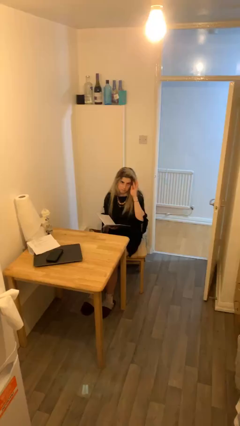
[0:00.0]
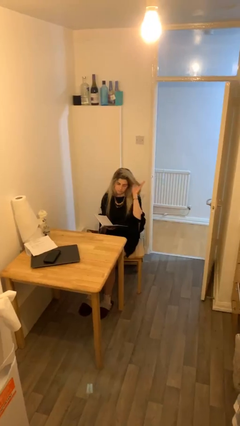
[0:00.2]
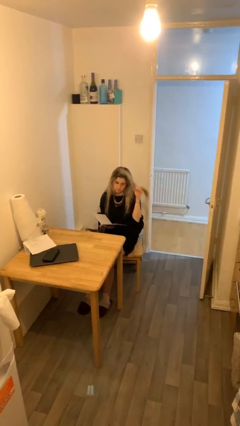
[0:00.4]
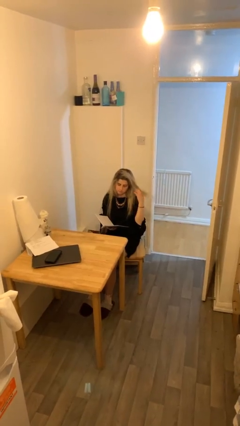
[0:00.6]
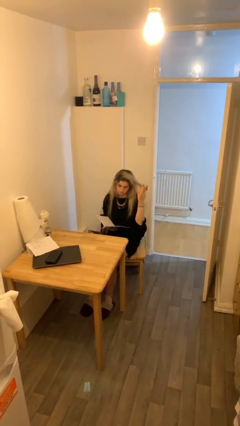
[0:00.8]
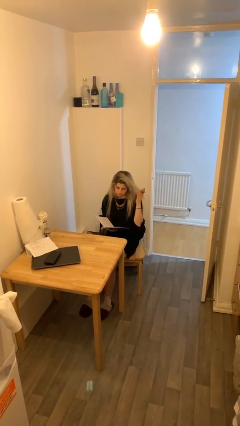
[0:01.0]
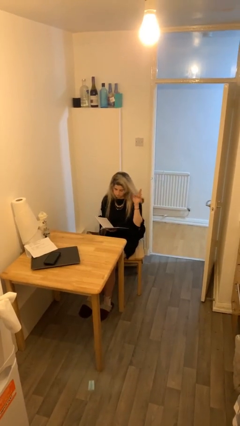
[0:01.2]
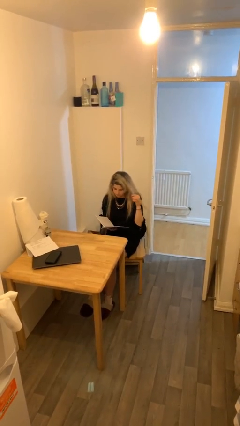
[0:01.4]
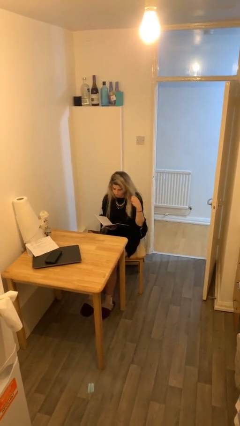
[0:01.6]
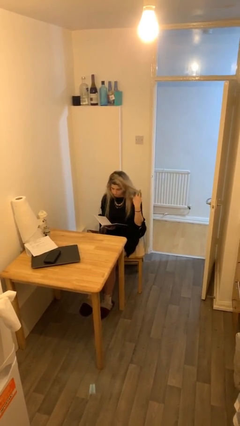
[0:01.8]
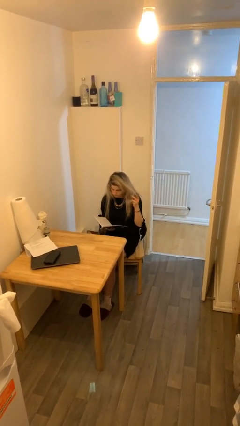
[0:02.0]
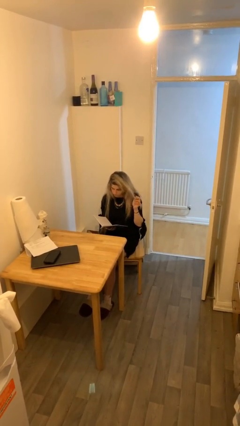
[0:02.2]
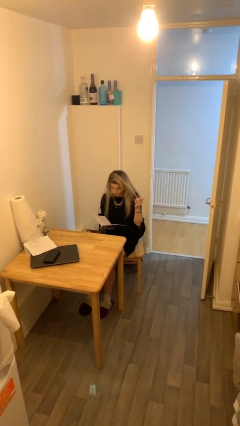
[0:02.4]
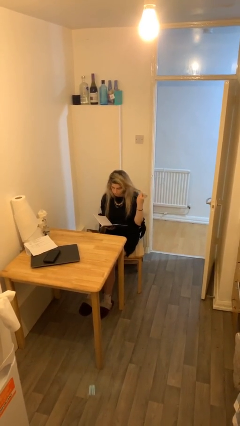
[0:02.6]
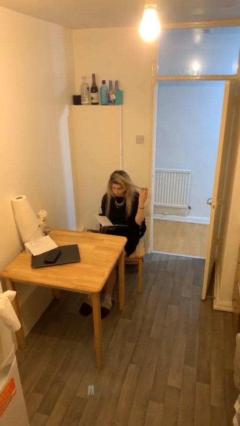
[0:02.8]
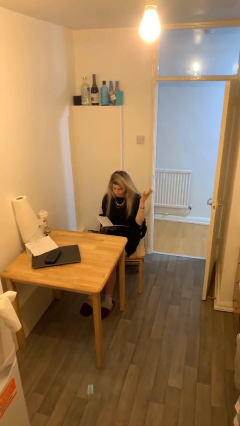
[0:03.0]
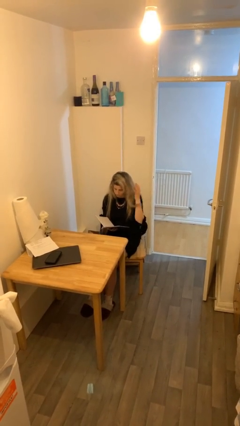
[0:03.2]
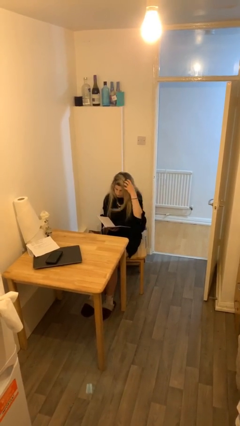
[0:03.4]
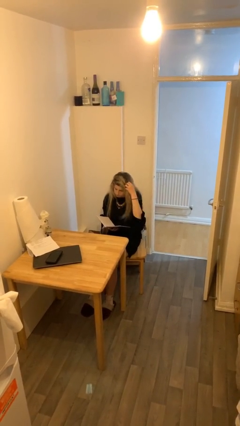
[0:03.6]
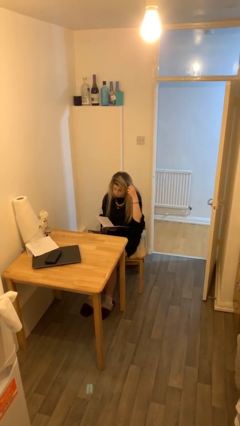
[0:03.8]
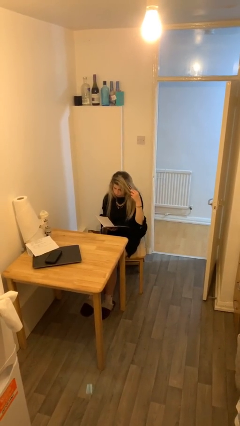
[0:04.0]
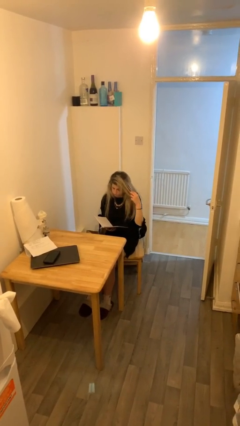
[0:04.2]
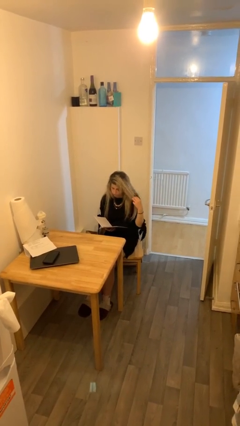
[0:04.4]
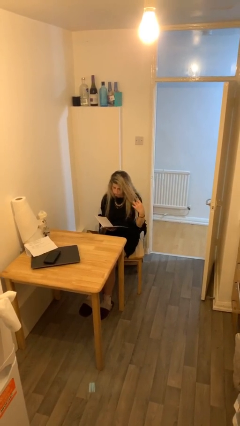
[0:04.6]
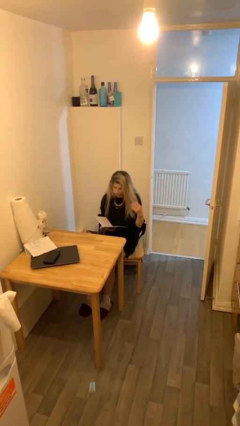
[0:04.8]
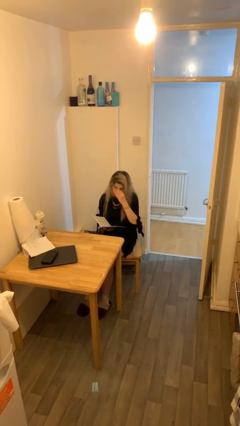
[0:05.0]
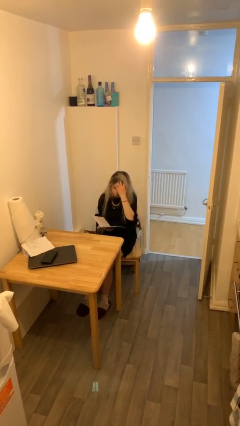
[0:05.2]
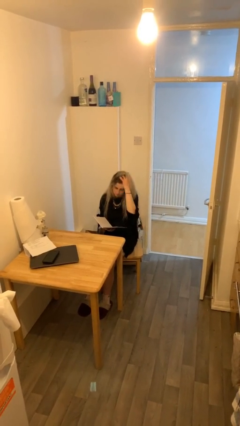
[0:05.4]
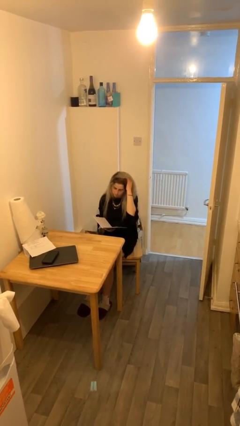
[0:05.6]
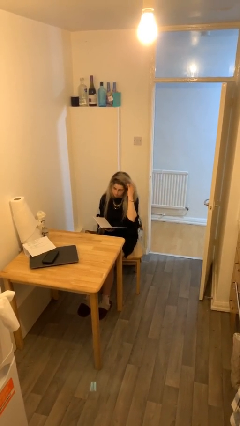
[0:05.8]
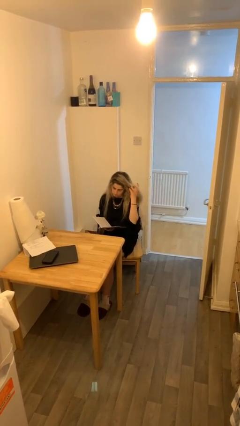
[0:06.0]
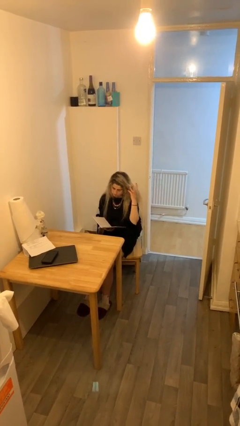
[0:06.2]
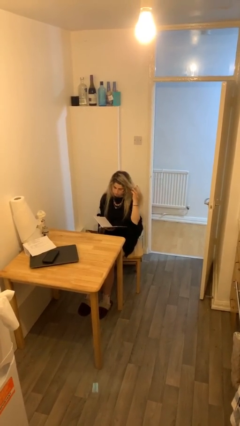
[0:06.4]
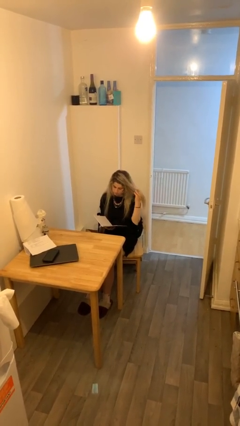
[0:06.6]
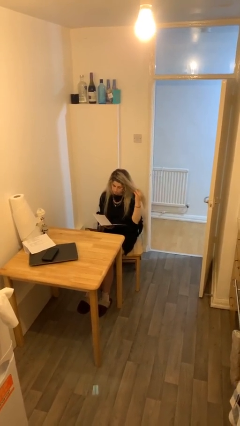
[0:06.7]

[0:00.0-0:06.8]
person reads document

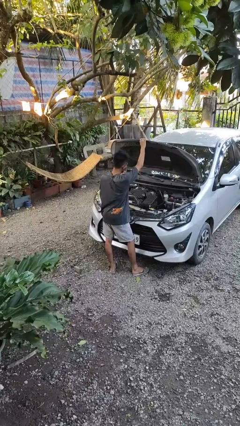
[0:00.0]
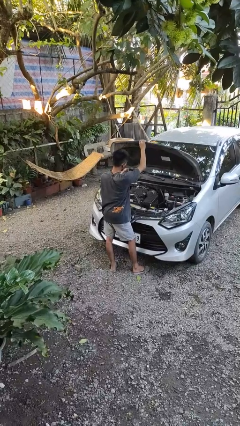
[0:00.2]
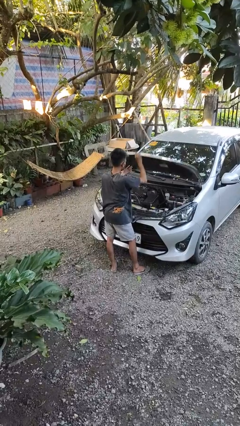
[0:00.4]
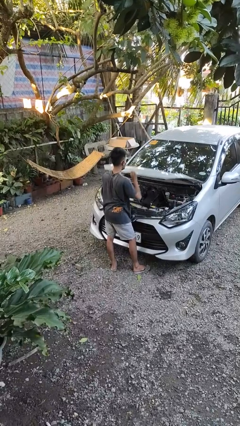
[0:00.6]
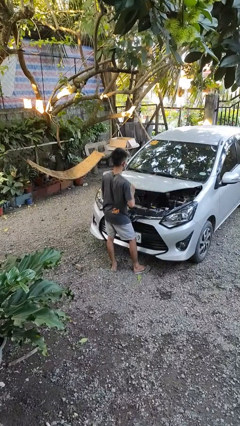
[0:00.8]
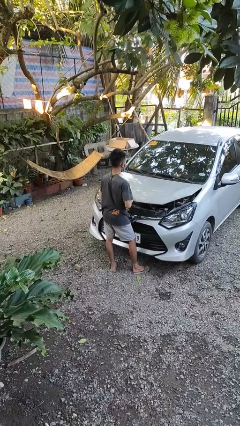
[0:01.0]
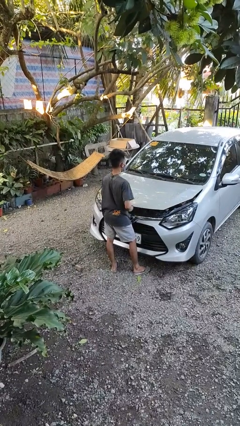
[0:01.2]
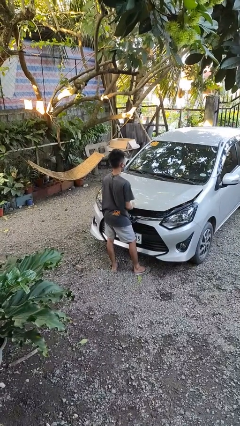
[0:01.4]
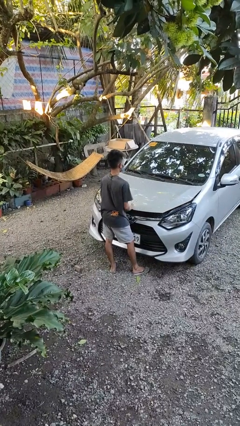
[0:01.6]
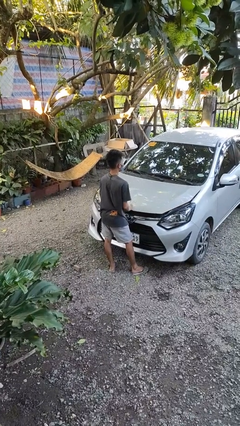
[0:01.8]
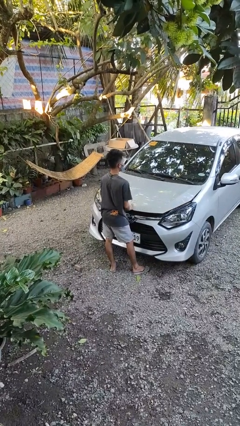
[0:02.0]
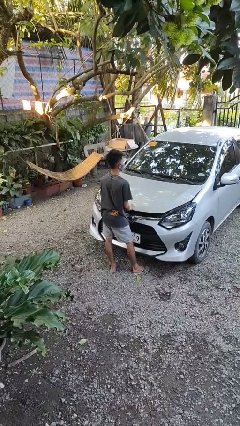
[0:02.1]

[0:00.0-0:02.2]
person closes car hood

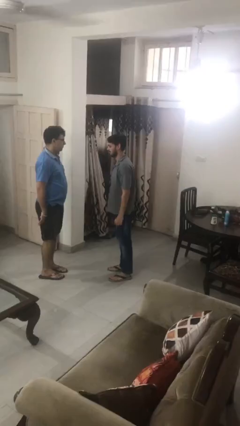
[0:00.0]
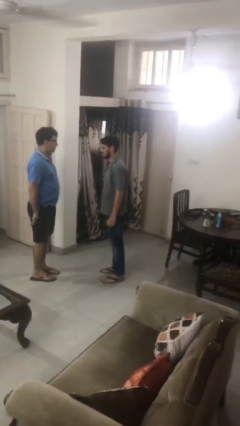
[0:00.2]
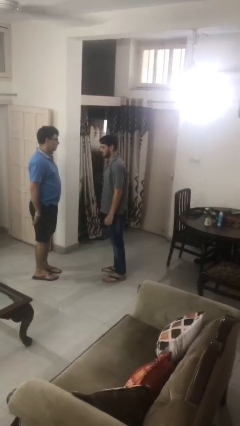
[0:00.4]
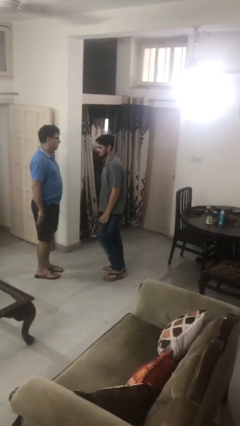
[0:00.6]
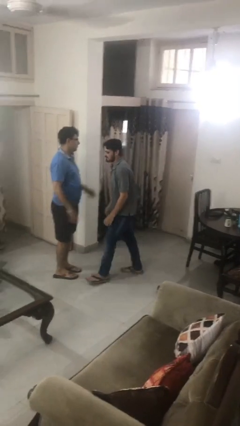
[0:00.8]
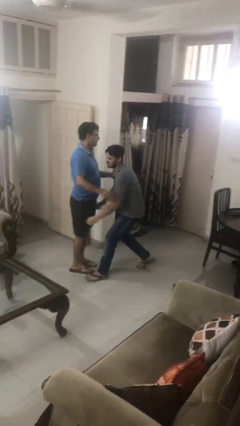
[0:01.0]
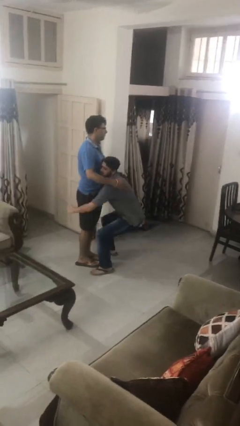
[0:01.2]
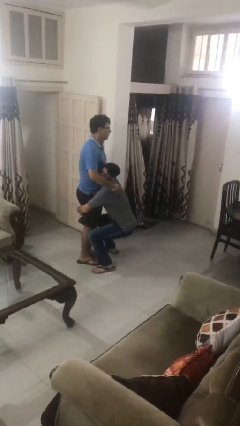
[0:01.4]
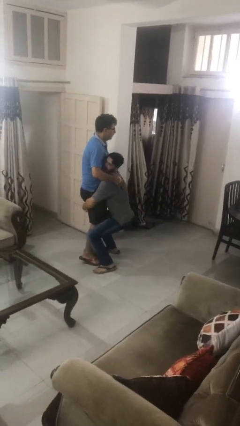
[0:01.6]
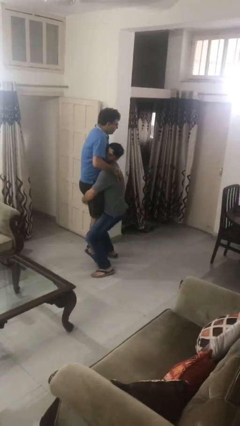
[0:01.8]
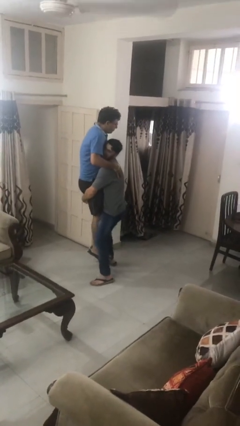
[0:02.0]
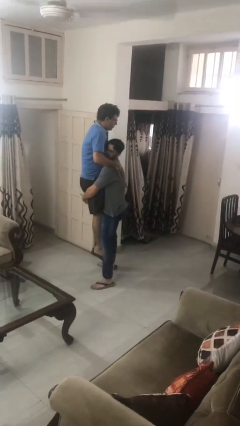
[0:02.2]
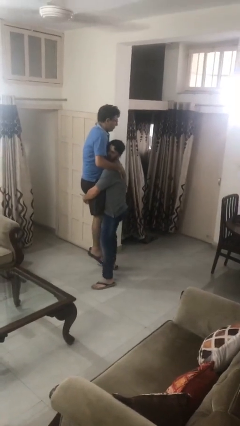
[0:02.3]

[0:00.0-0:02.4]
person picks up person

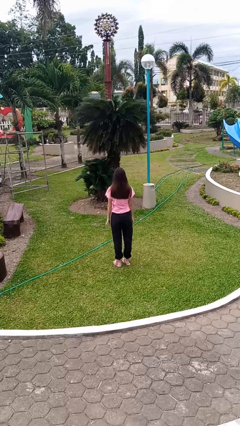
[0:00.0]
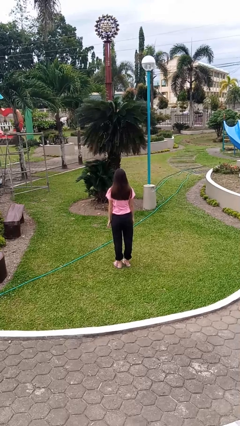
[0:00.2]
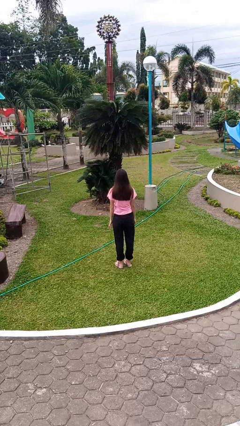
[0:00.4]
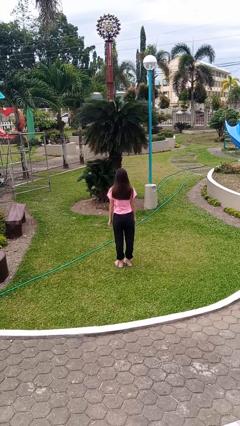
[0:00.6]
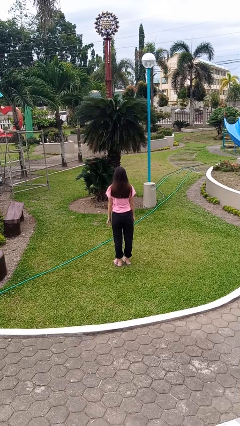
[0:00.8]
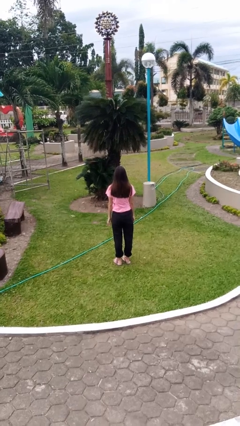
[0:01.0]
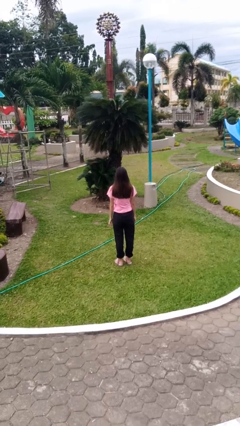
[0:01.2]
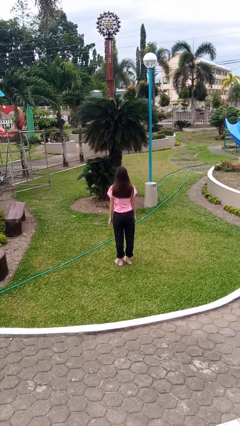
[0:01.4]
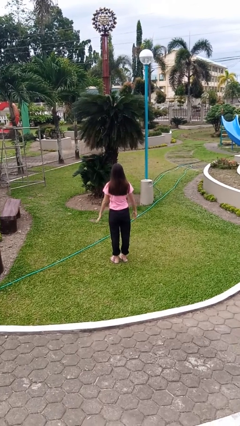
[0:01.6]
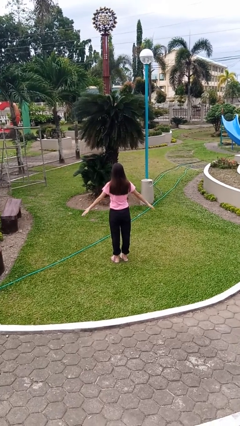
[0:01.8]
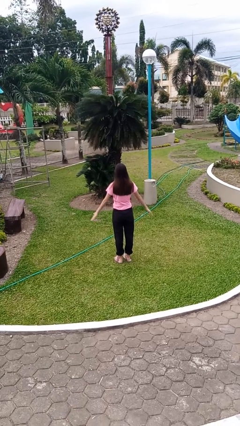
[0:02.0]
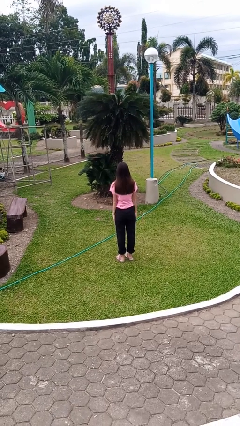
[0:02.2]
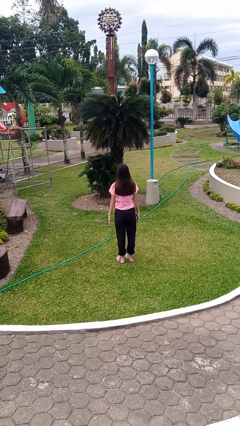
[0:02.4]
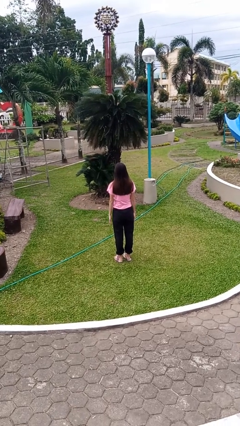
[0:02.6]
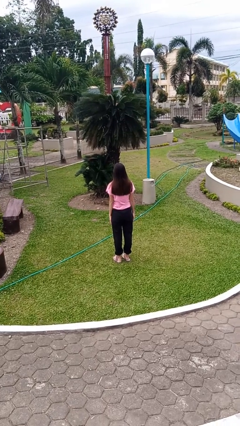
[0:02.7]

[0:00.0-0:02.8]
person slaps hands on thighs

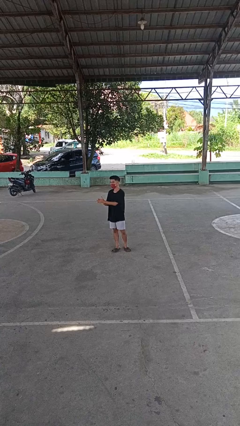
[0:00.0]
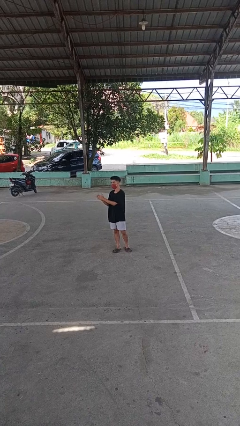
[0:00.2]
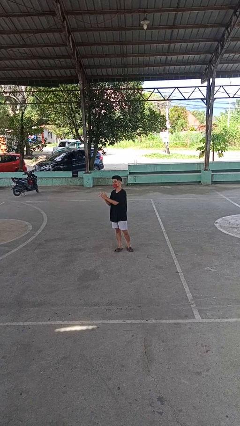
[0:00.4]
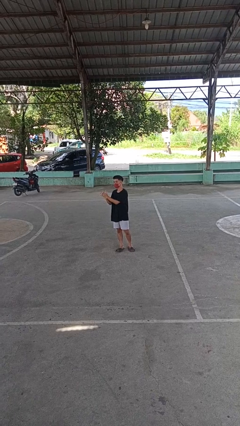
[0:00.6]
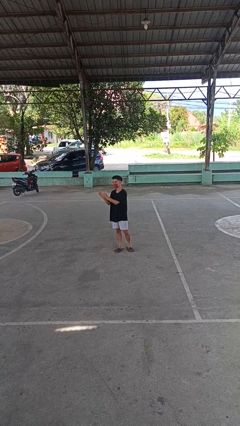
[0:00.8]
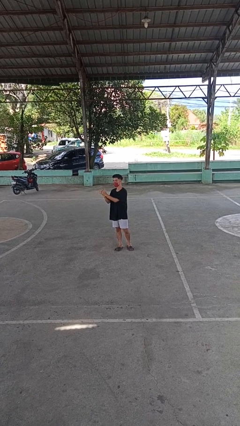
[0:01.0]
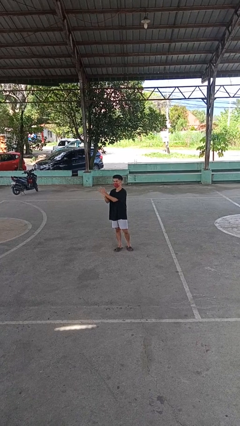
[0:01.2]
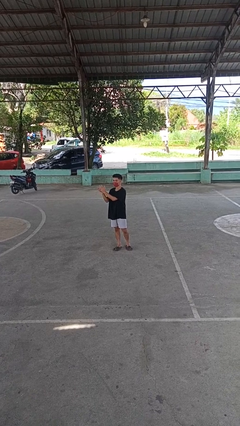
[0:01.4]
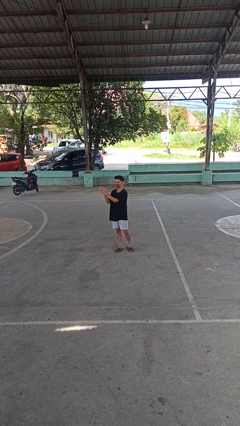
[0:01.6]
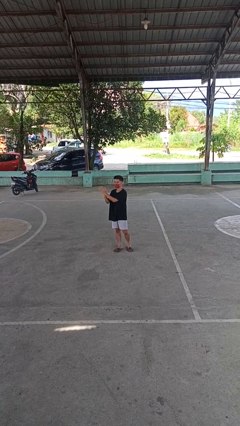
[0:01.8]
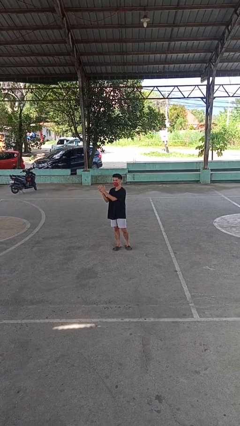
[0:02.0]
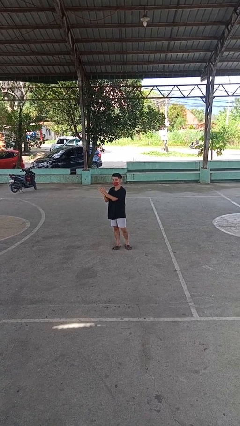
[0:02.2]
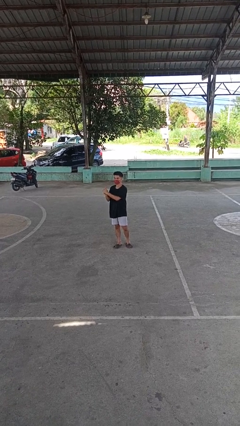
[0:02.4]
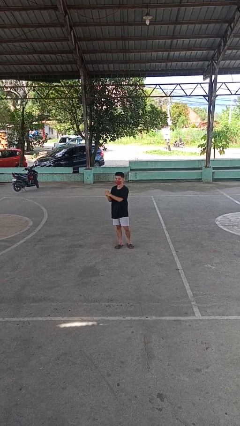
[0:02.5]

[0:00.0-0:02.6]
person claps hands

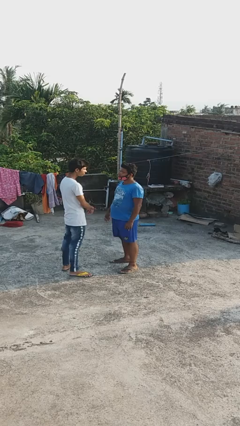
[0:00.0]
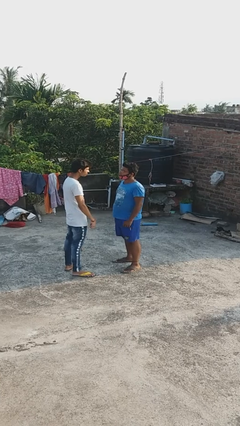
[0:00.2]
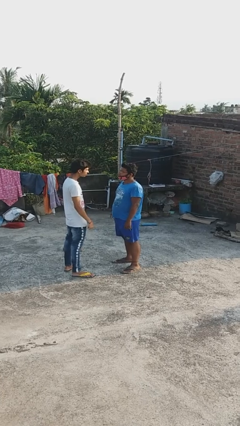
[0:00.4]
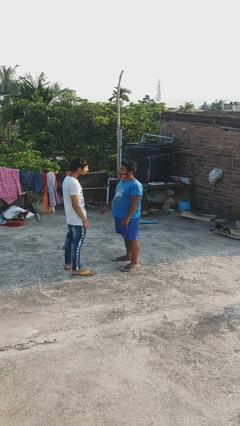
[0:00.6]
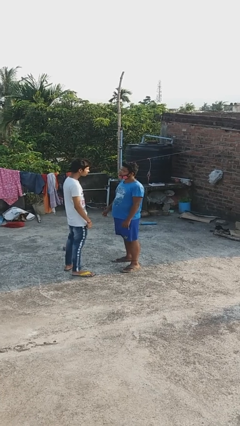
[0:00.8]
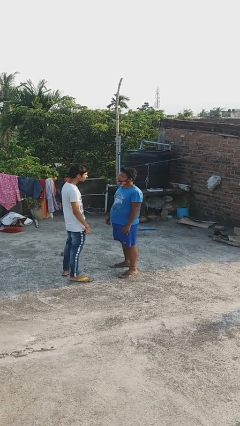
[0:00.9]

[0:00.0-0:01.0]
person highfives hand
